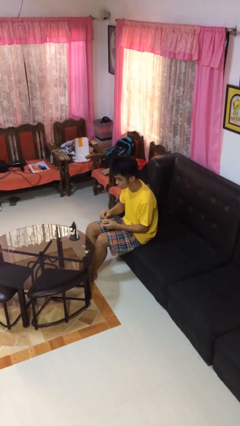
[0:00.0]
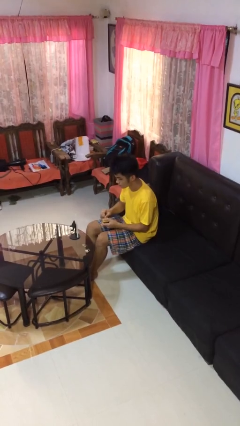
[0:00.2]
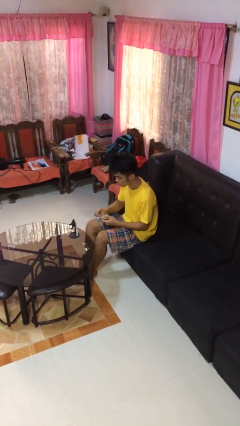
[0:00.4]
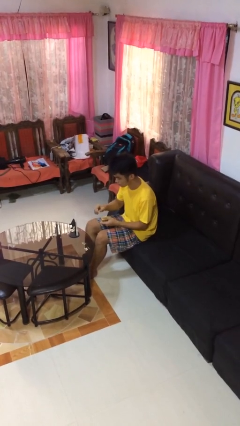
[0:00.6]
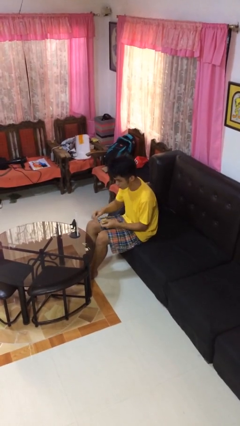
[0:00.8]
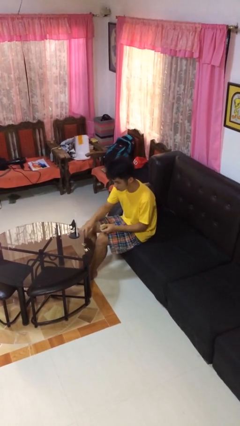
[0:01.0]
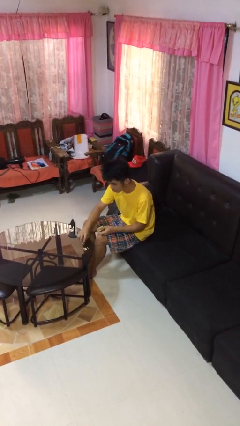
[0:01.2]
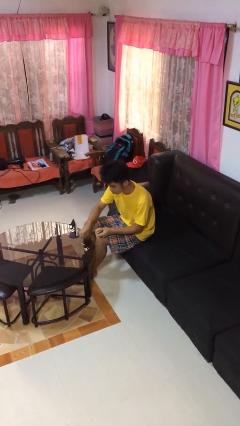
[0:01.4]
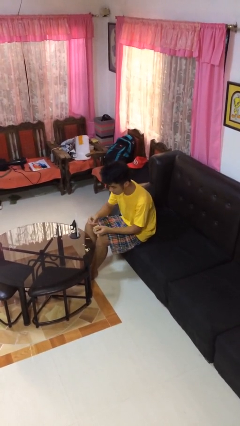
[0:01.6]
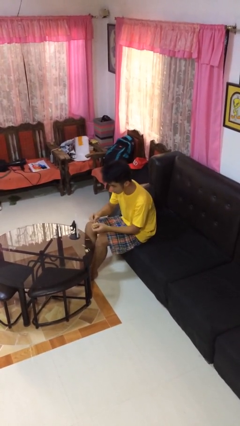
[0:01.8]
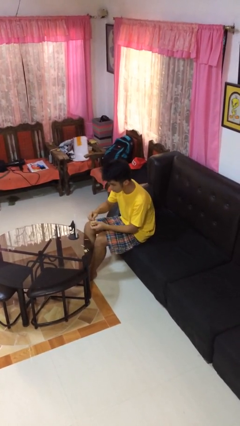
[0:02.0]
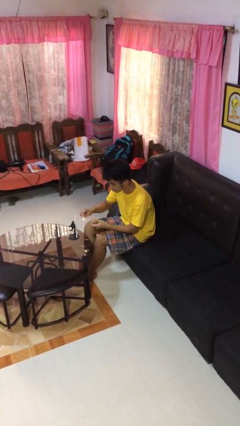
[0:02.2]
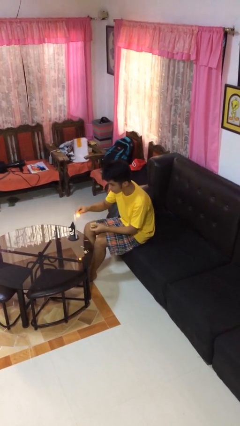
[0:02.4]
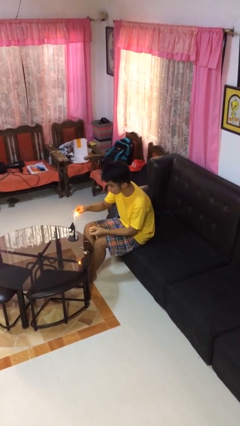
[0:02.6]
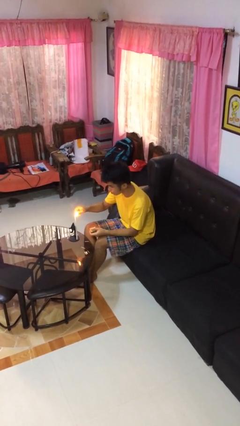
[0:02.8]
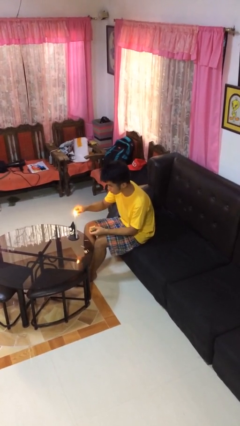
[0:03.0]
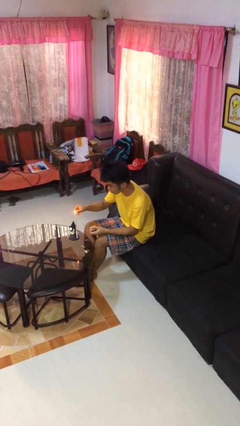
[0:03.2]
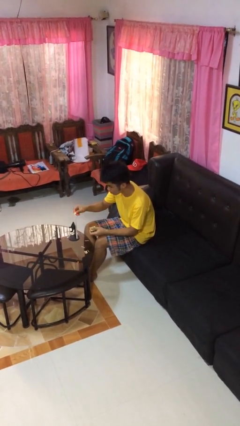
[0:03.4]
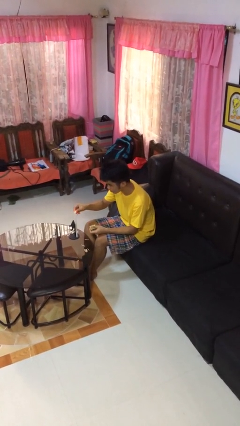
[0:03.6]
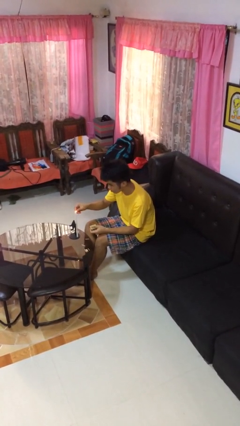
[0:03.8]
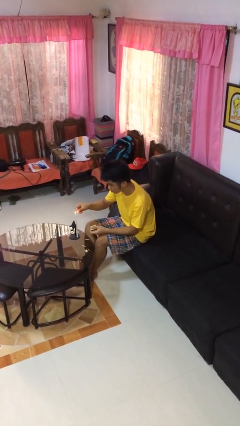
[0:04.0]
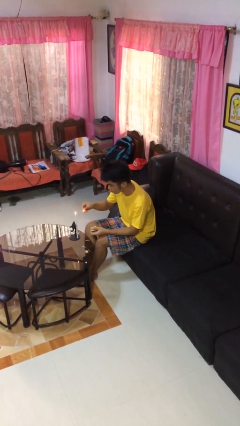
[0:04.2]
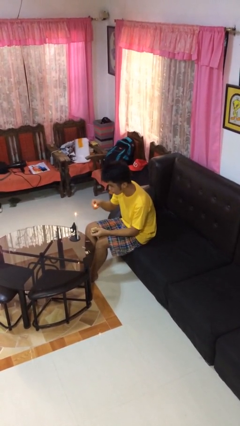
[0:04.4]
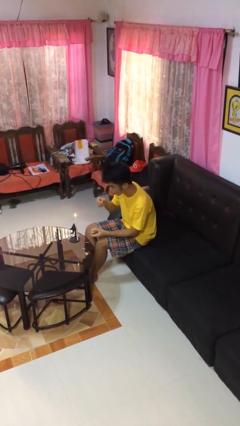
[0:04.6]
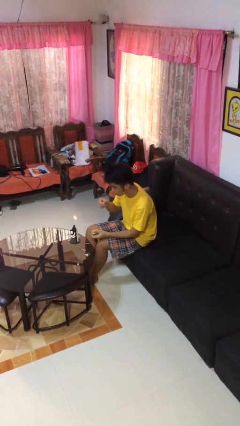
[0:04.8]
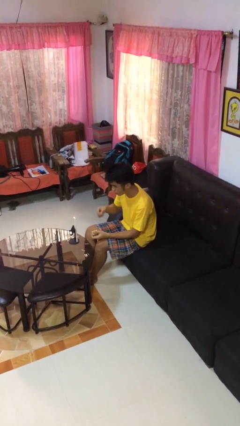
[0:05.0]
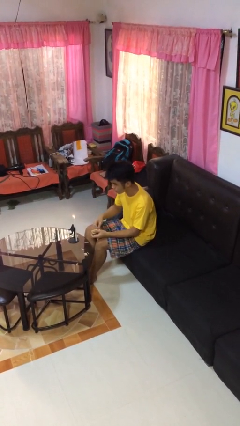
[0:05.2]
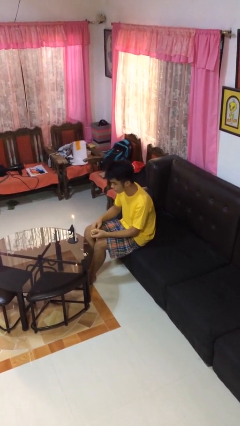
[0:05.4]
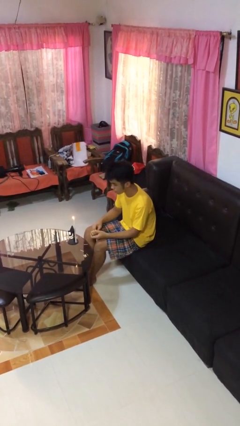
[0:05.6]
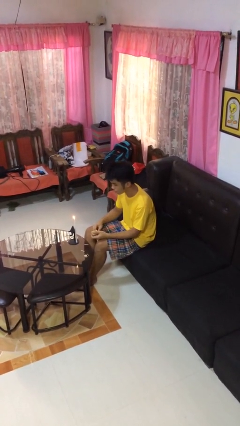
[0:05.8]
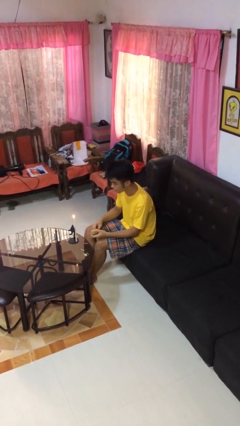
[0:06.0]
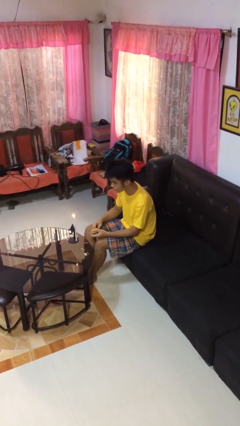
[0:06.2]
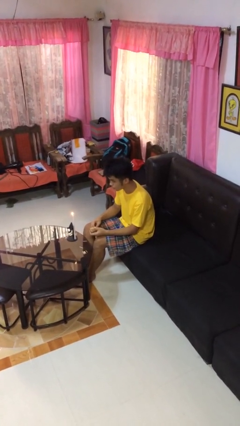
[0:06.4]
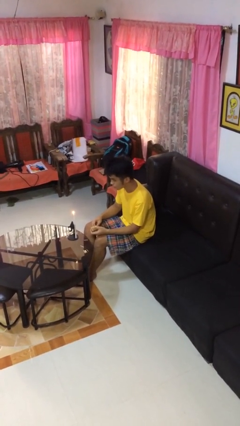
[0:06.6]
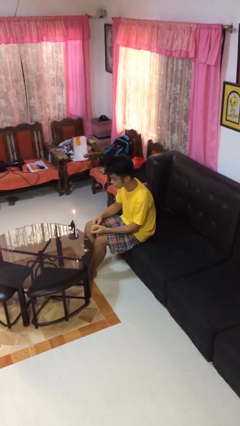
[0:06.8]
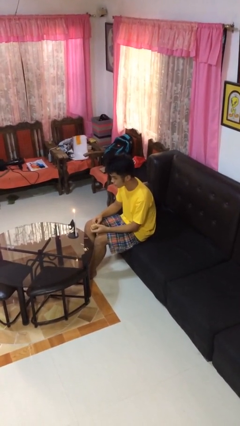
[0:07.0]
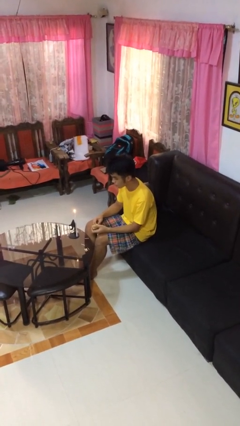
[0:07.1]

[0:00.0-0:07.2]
person lights candle

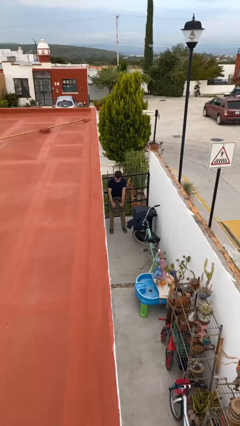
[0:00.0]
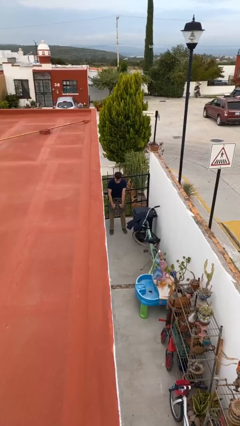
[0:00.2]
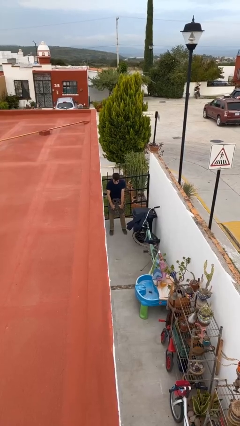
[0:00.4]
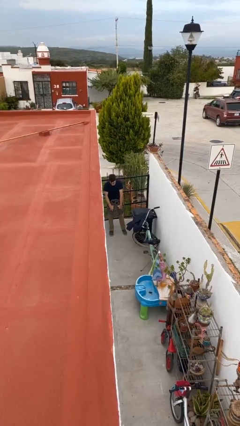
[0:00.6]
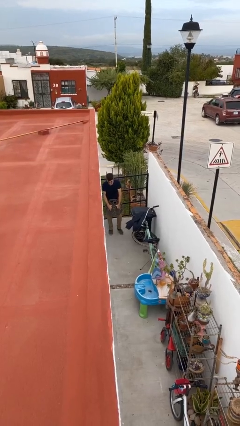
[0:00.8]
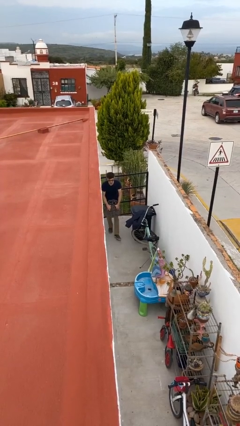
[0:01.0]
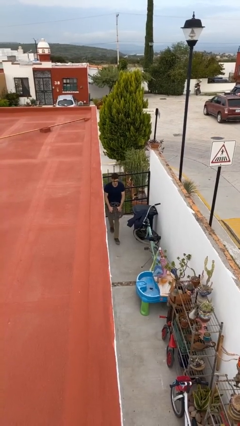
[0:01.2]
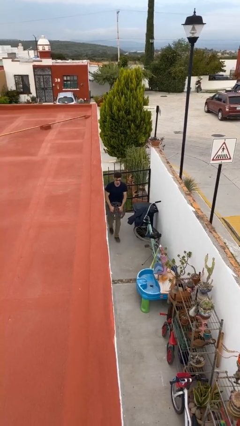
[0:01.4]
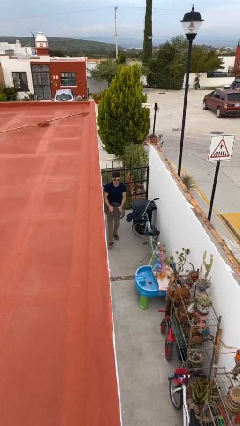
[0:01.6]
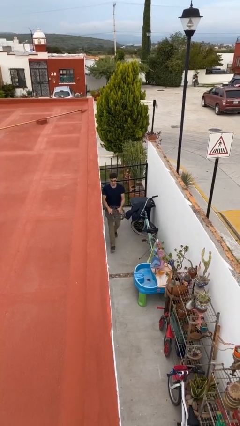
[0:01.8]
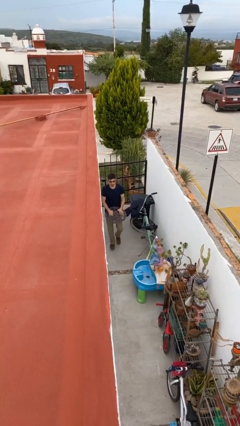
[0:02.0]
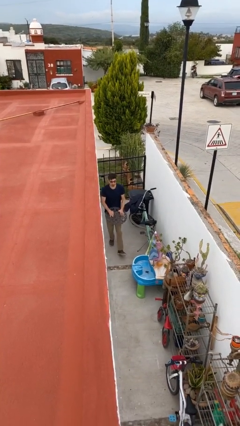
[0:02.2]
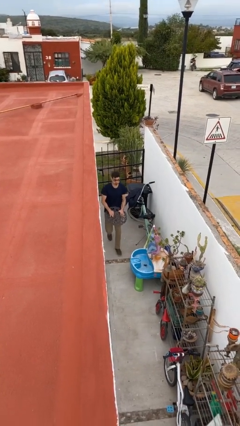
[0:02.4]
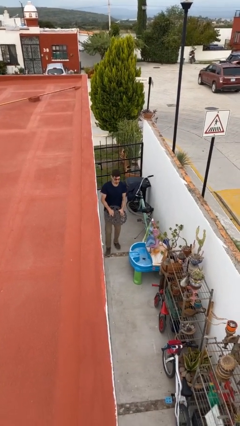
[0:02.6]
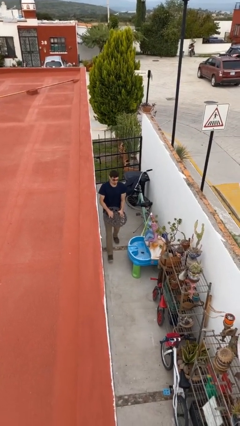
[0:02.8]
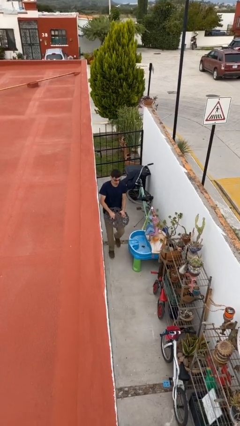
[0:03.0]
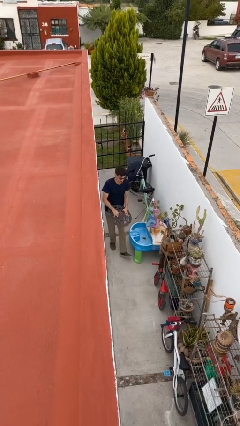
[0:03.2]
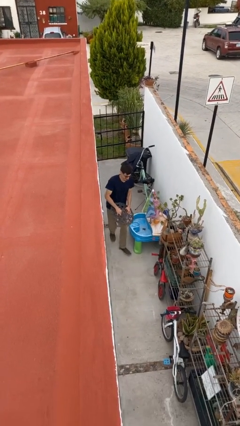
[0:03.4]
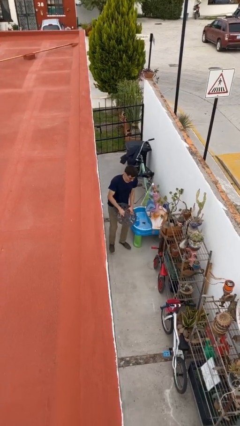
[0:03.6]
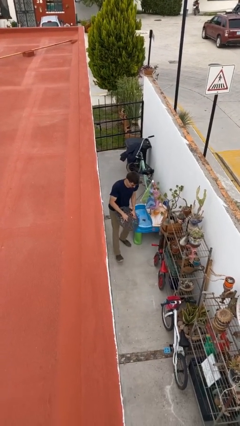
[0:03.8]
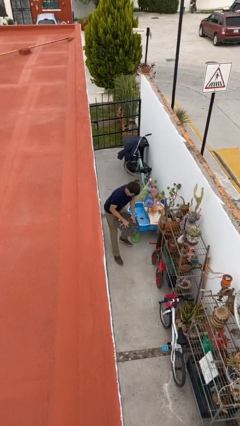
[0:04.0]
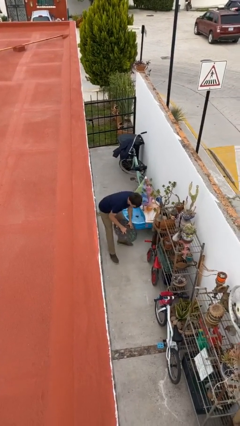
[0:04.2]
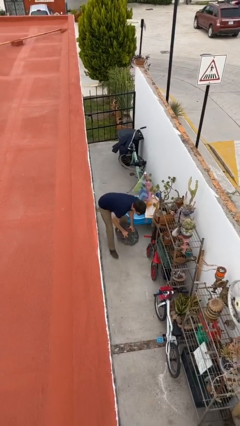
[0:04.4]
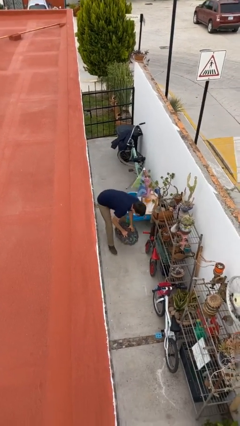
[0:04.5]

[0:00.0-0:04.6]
person carries heavy object

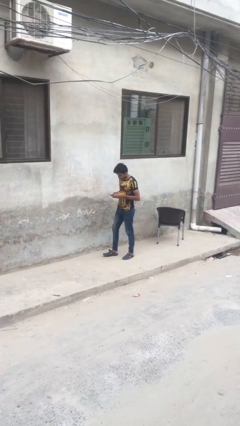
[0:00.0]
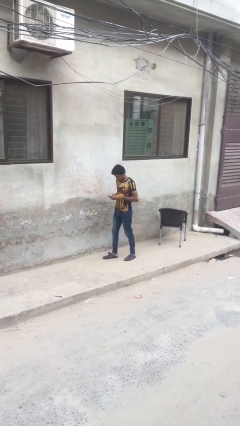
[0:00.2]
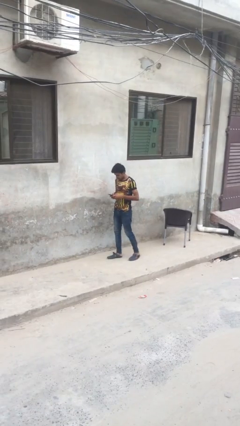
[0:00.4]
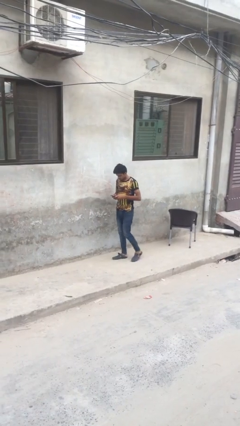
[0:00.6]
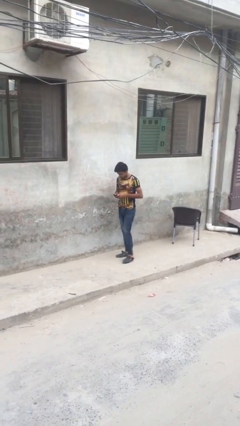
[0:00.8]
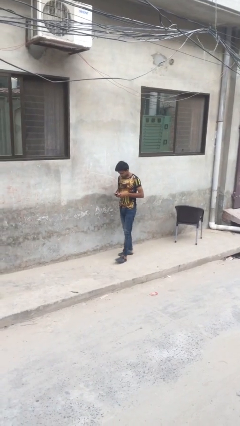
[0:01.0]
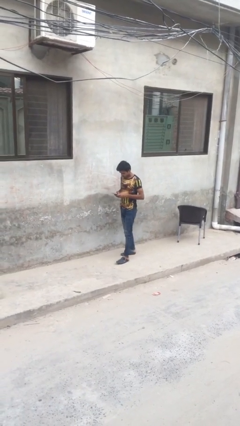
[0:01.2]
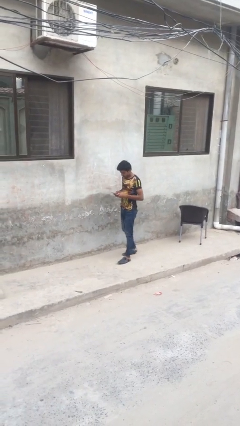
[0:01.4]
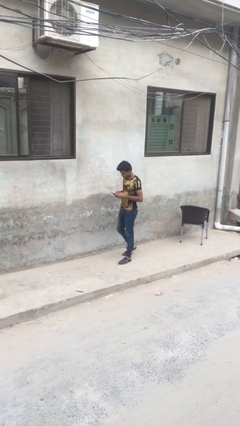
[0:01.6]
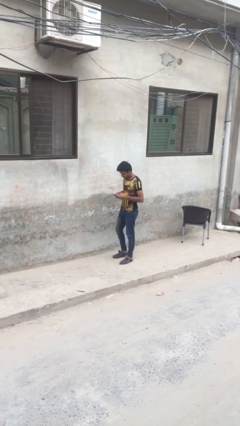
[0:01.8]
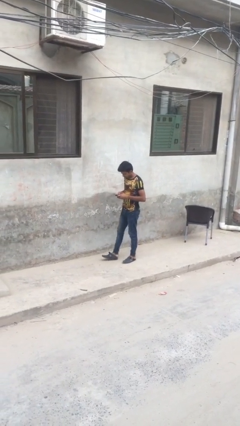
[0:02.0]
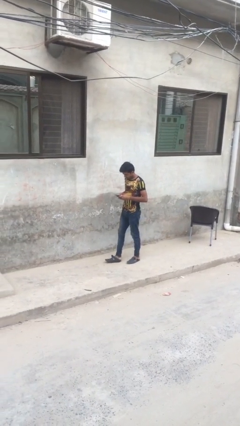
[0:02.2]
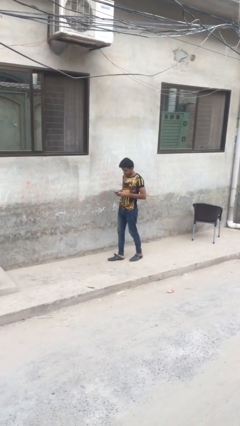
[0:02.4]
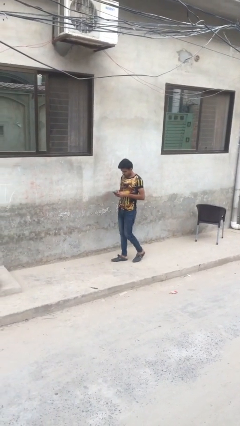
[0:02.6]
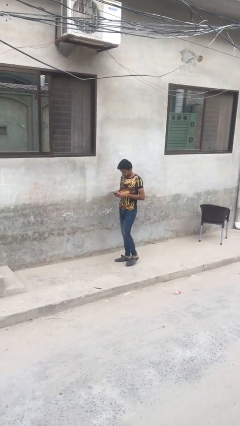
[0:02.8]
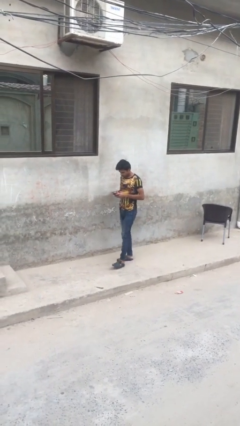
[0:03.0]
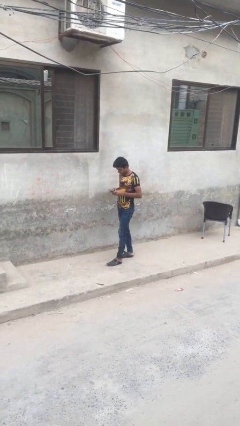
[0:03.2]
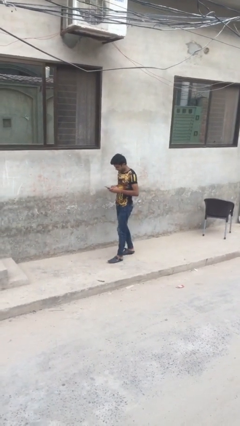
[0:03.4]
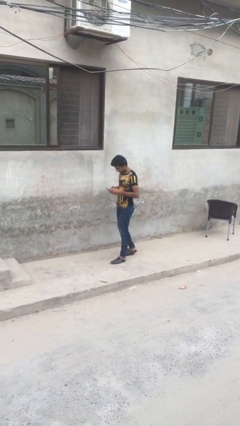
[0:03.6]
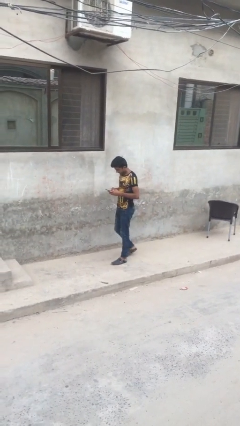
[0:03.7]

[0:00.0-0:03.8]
person texts on phone

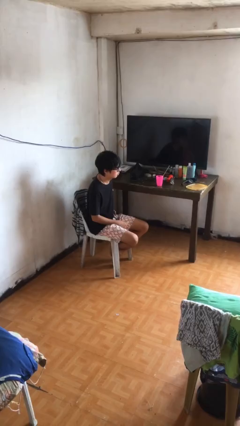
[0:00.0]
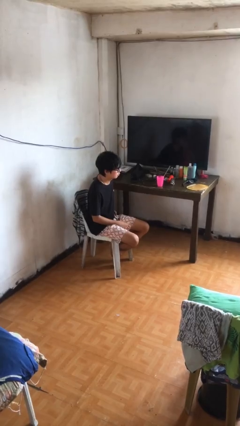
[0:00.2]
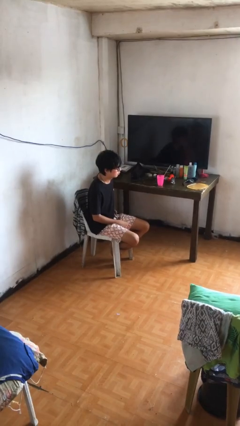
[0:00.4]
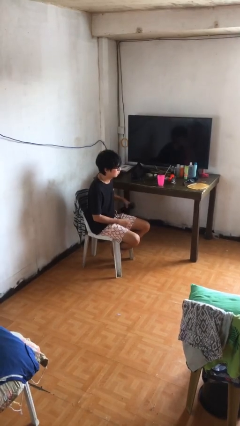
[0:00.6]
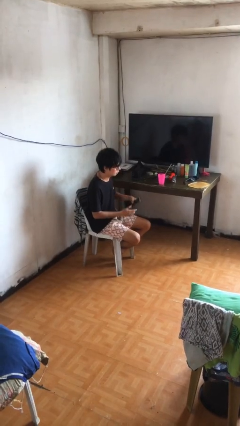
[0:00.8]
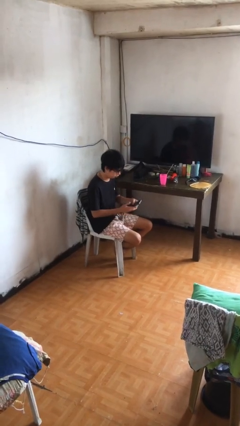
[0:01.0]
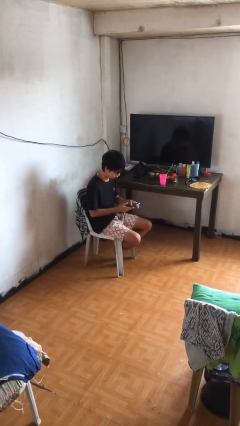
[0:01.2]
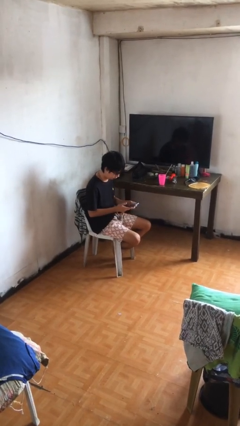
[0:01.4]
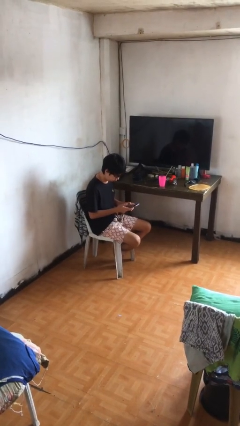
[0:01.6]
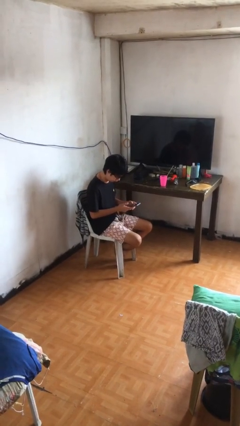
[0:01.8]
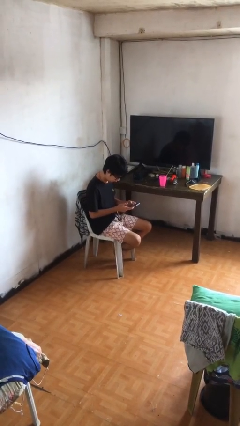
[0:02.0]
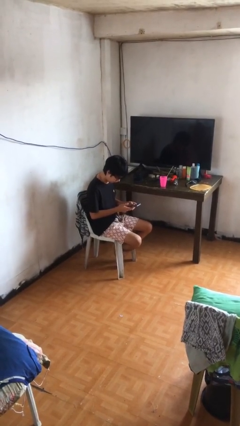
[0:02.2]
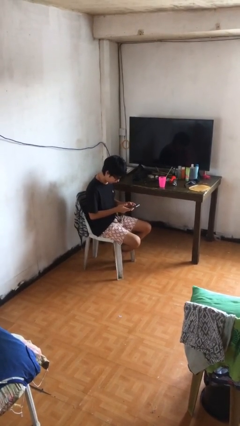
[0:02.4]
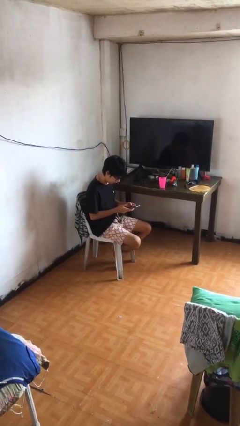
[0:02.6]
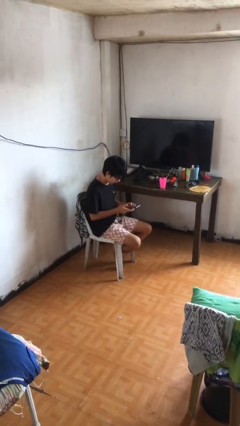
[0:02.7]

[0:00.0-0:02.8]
person takes phone from pocket
